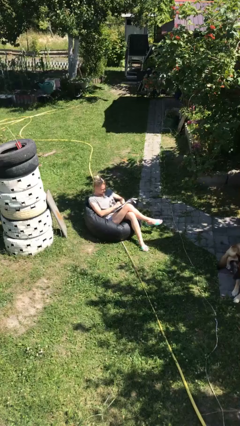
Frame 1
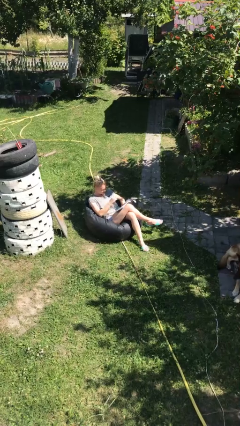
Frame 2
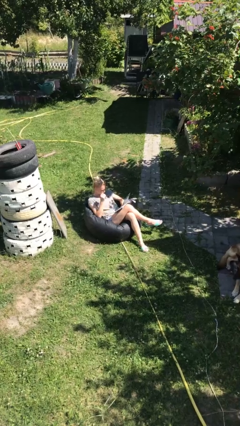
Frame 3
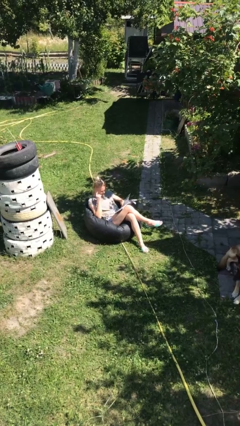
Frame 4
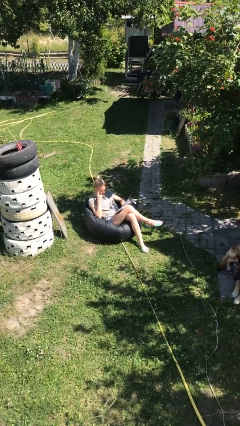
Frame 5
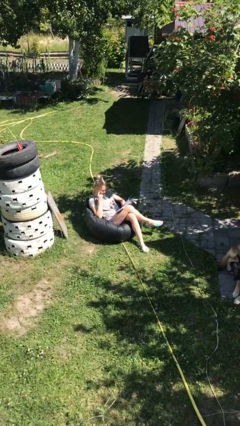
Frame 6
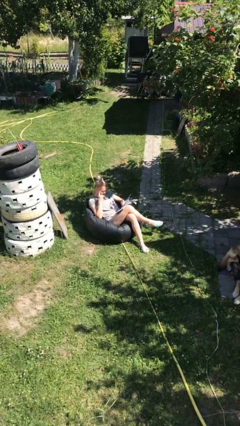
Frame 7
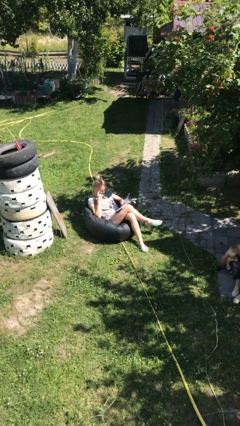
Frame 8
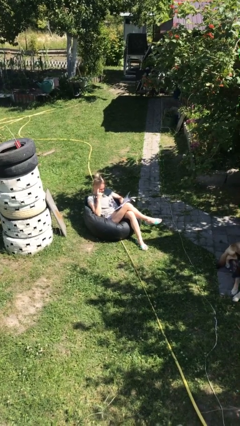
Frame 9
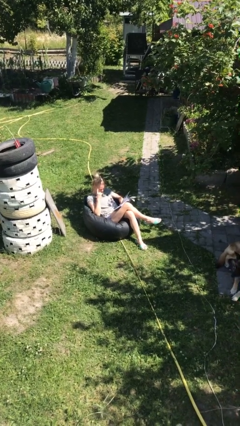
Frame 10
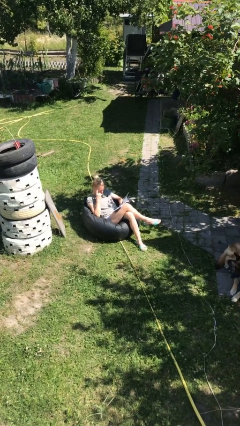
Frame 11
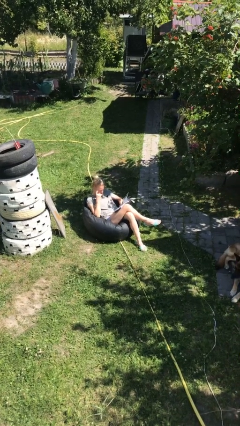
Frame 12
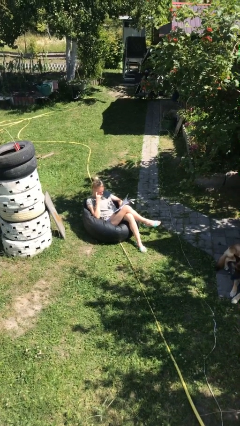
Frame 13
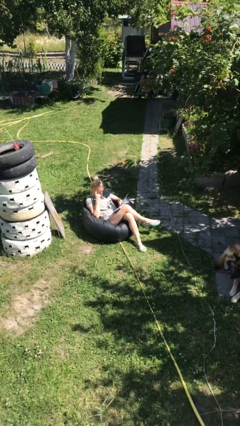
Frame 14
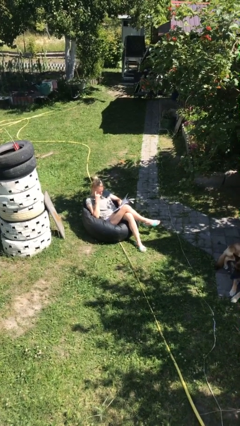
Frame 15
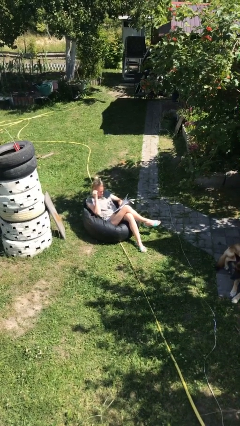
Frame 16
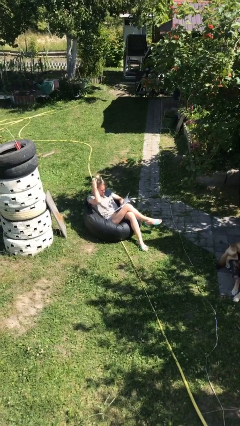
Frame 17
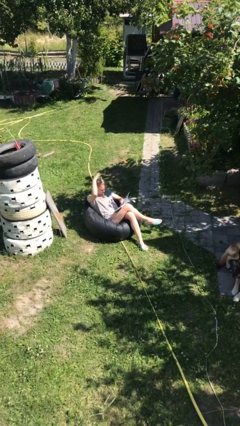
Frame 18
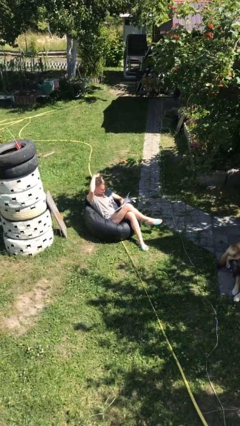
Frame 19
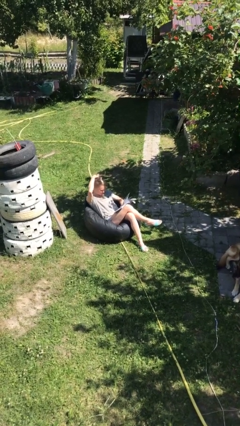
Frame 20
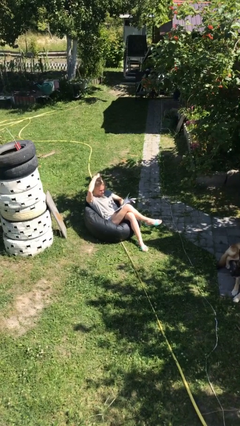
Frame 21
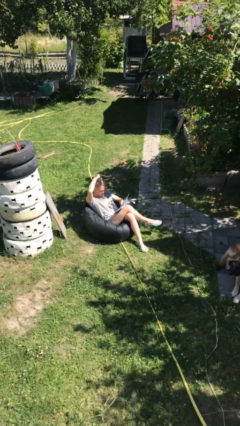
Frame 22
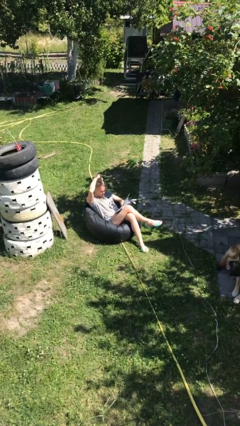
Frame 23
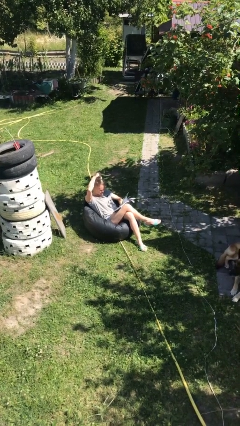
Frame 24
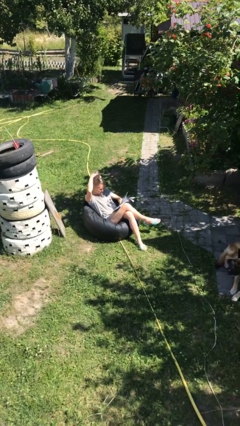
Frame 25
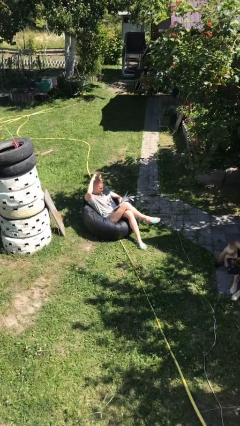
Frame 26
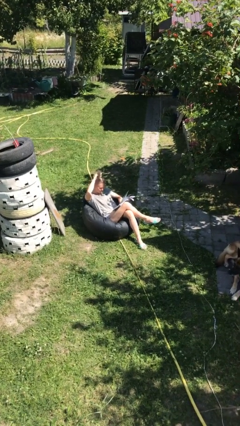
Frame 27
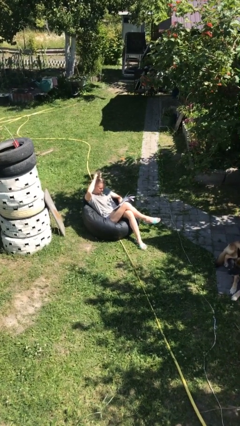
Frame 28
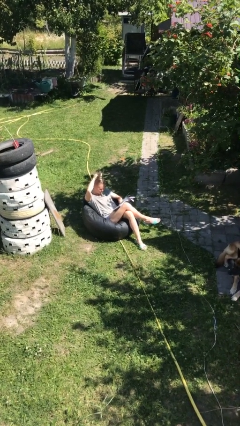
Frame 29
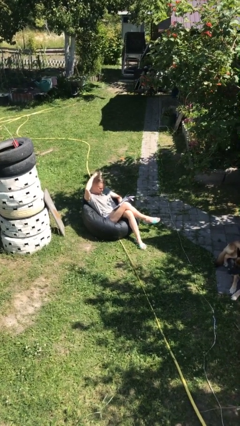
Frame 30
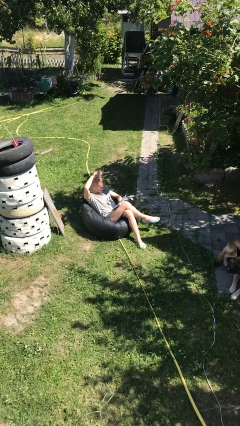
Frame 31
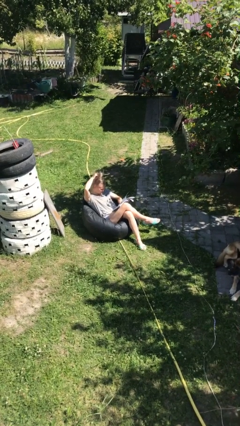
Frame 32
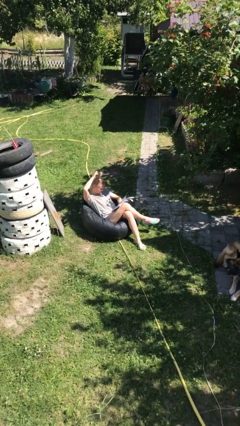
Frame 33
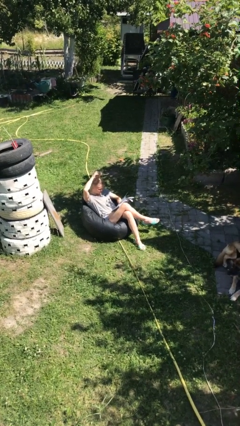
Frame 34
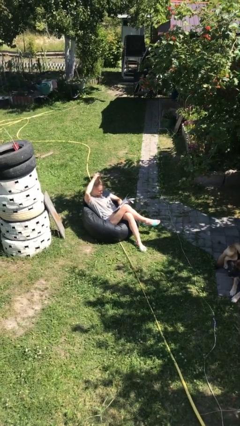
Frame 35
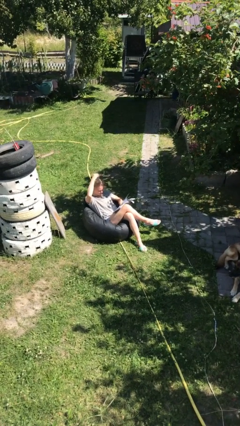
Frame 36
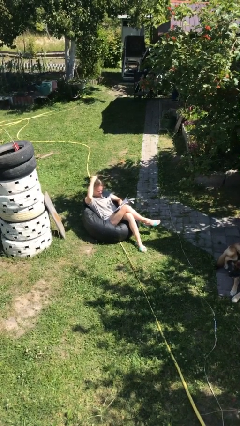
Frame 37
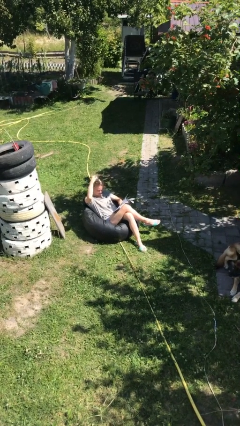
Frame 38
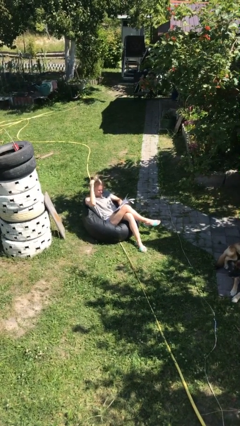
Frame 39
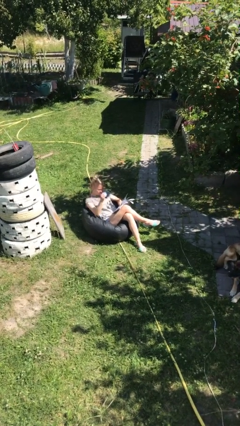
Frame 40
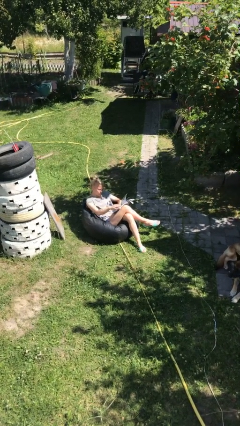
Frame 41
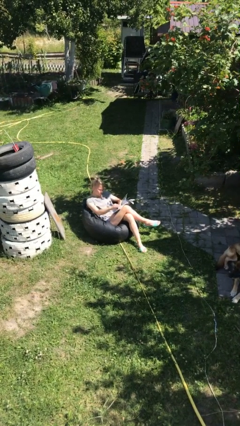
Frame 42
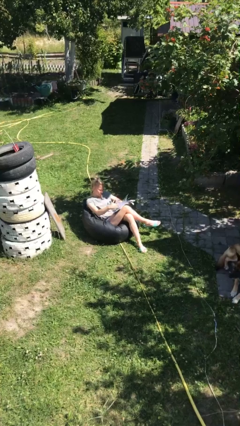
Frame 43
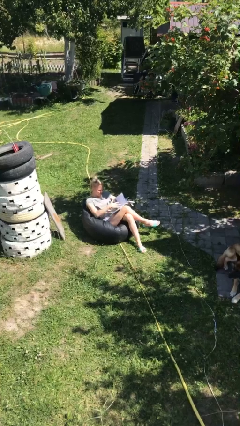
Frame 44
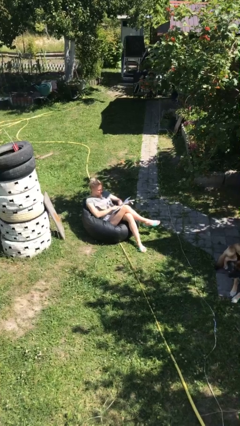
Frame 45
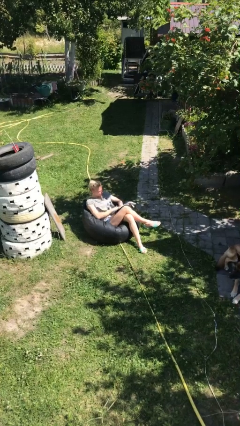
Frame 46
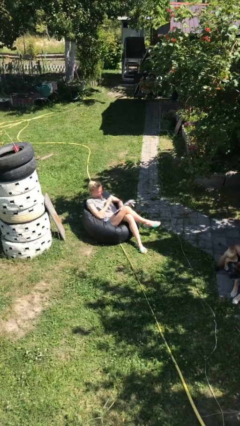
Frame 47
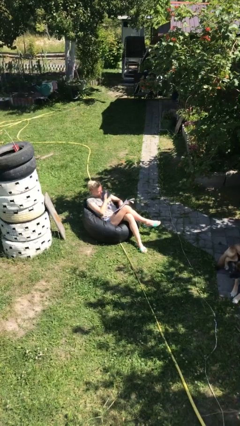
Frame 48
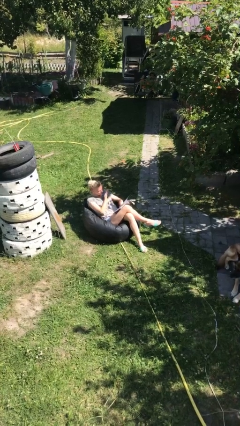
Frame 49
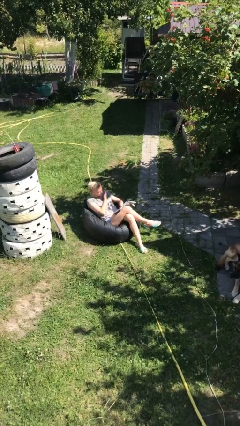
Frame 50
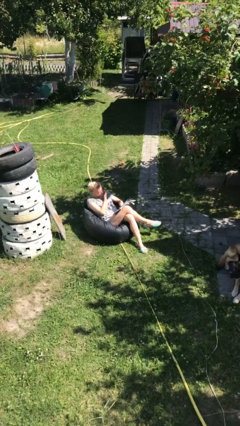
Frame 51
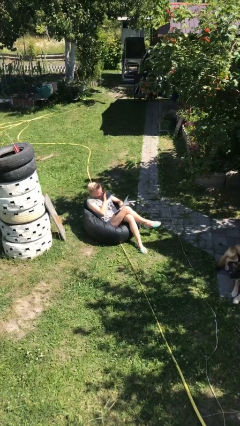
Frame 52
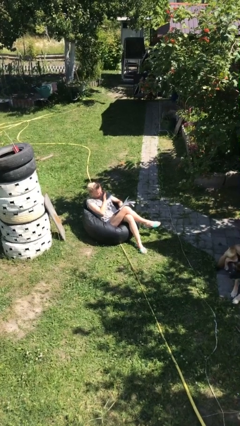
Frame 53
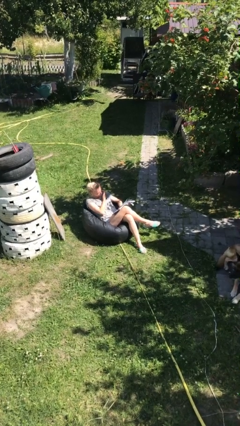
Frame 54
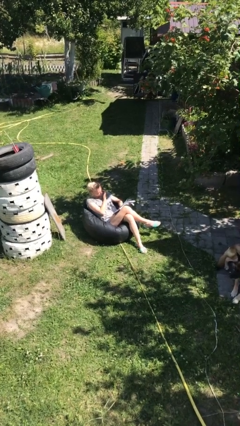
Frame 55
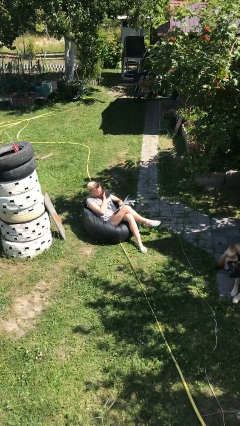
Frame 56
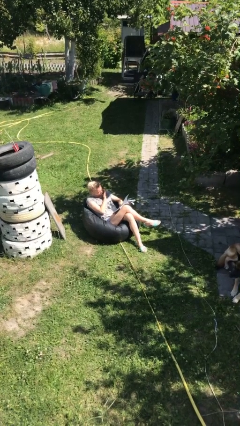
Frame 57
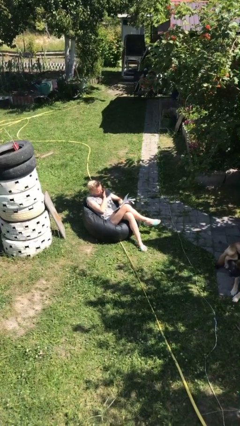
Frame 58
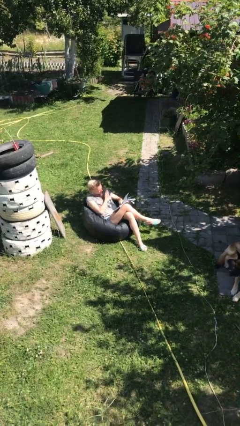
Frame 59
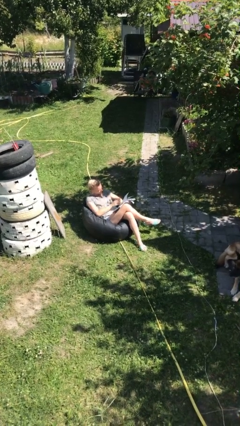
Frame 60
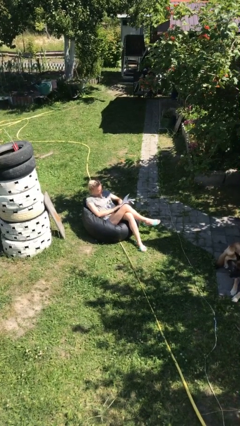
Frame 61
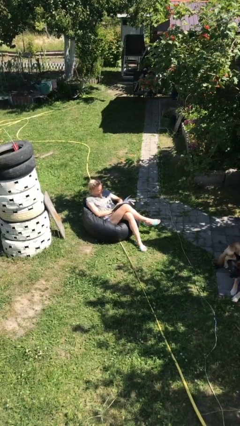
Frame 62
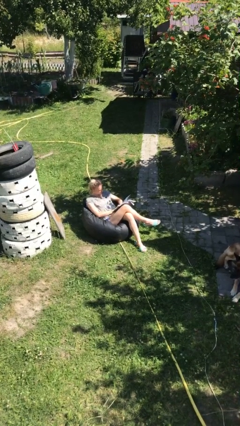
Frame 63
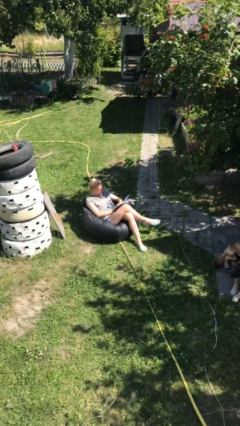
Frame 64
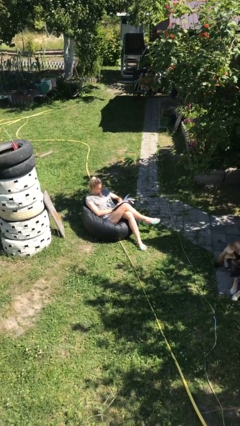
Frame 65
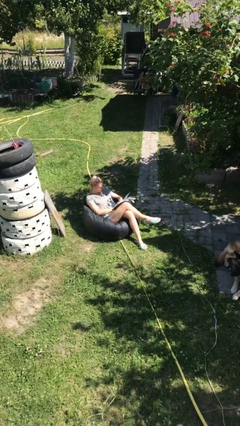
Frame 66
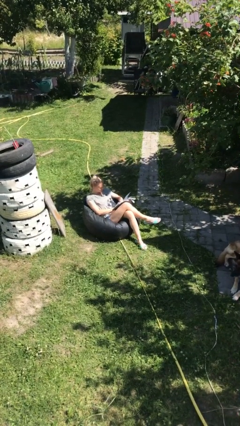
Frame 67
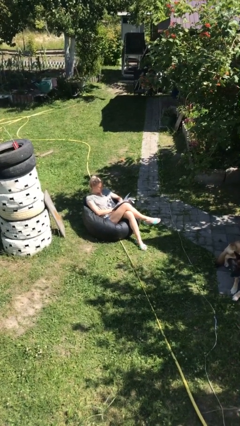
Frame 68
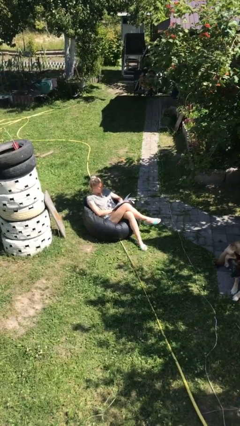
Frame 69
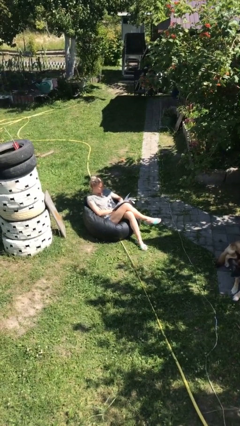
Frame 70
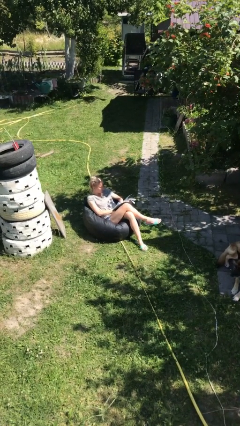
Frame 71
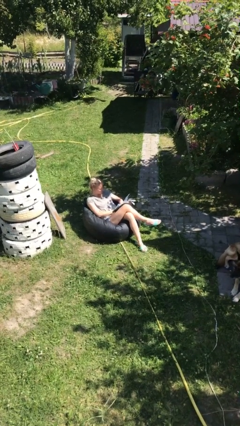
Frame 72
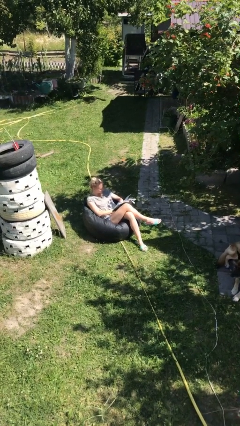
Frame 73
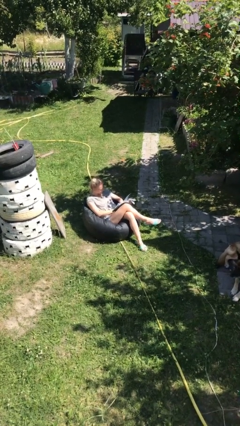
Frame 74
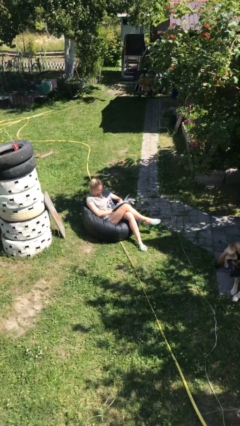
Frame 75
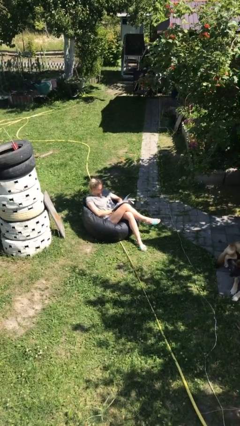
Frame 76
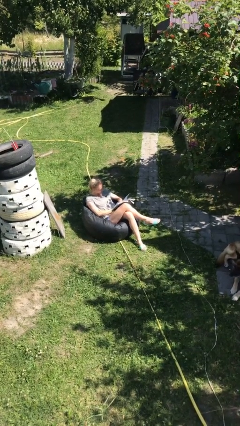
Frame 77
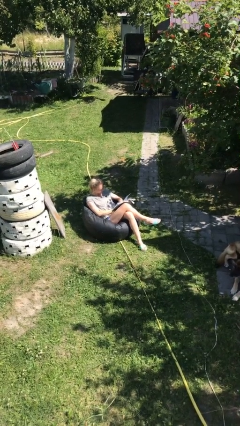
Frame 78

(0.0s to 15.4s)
person reads document

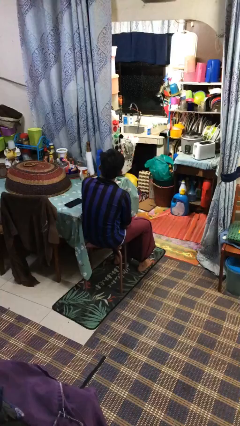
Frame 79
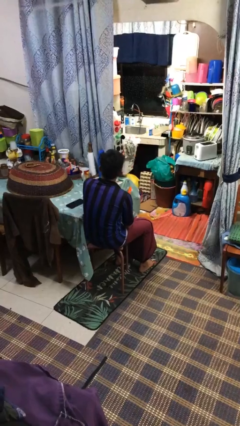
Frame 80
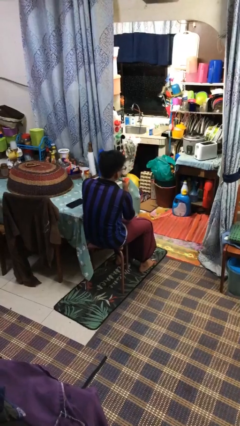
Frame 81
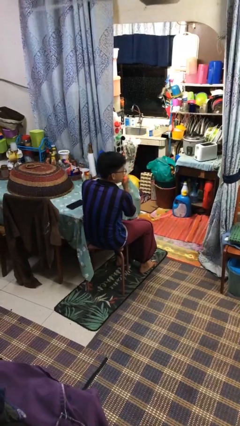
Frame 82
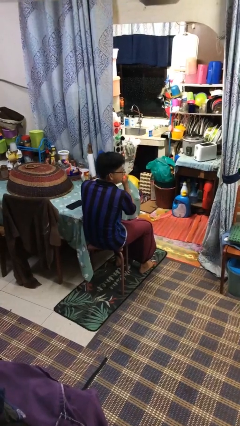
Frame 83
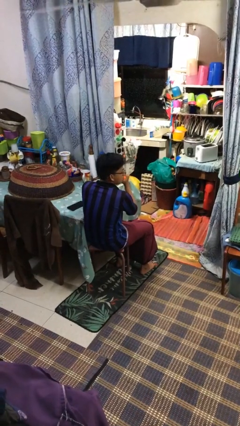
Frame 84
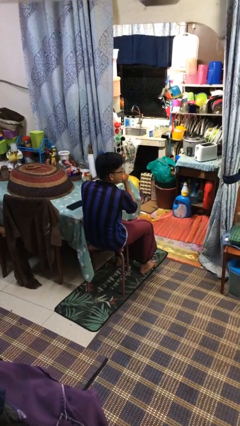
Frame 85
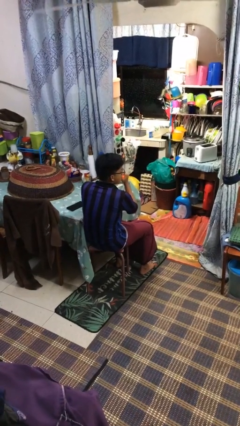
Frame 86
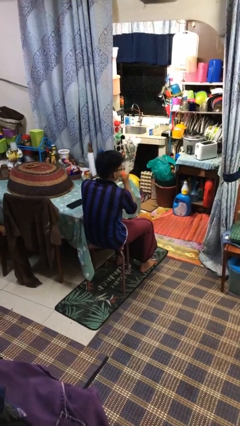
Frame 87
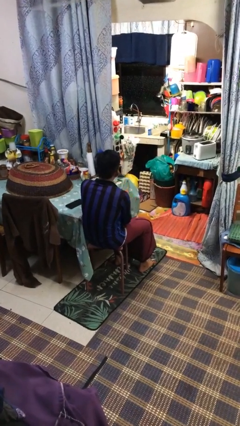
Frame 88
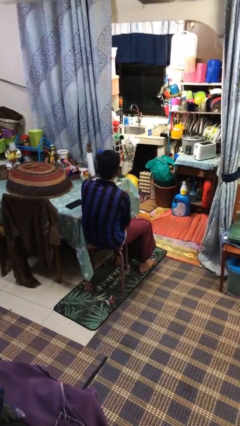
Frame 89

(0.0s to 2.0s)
person vapes

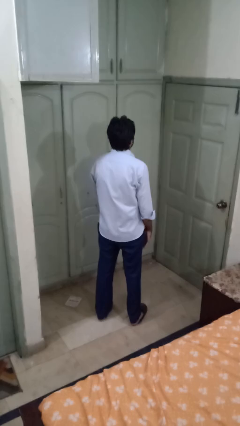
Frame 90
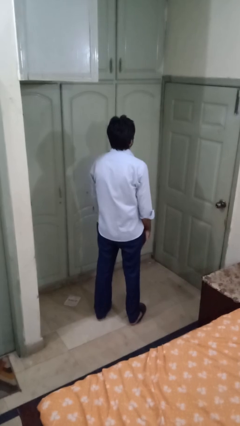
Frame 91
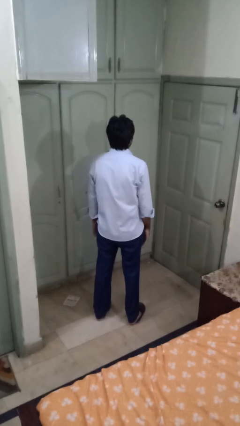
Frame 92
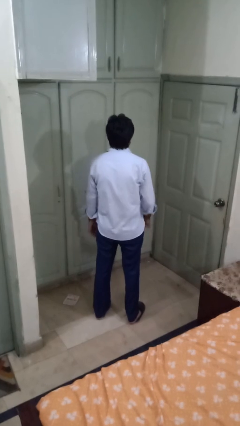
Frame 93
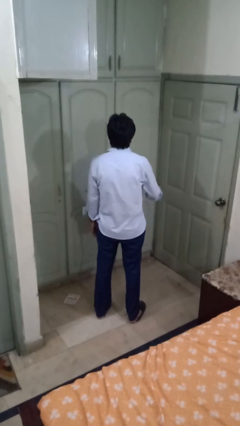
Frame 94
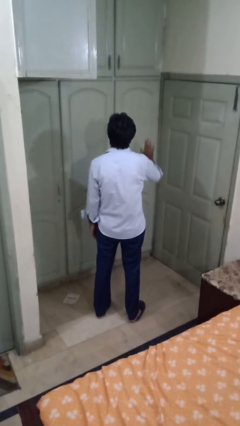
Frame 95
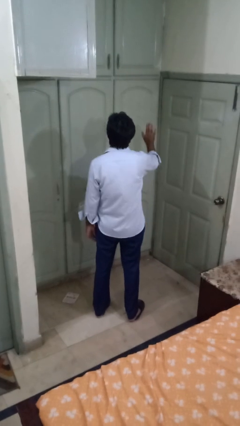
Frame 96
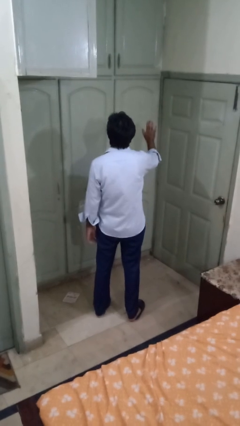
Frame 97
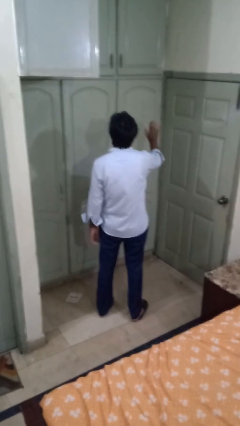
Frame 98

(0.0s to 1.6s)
person gestures stop
